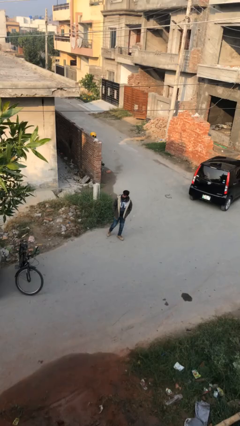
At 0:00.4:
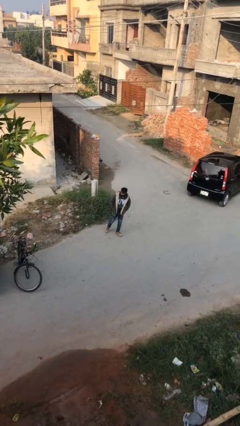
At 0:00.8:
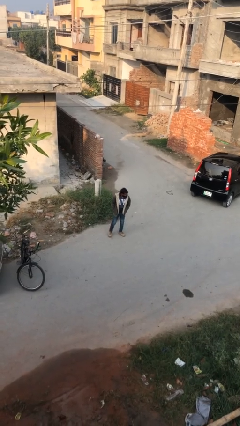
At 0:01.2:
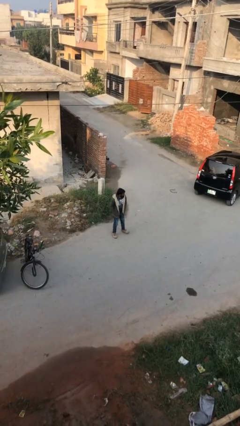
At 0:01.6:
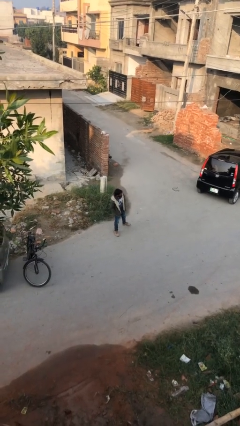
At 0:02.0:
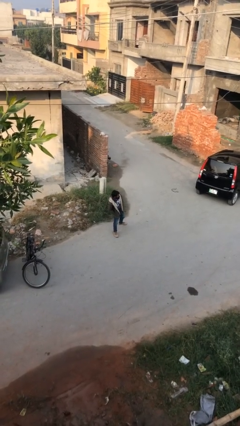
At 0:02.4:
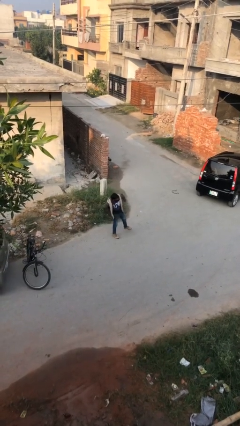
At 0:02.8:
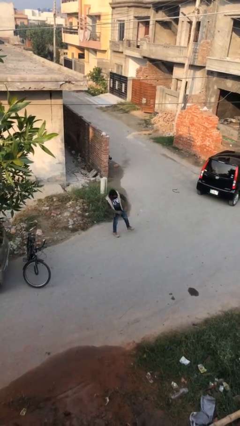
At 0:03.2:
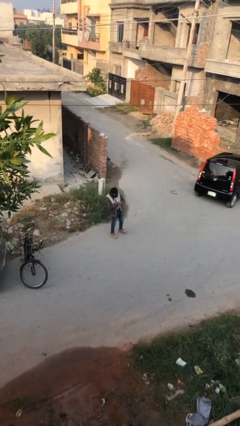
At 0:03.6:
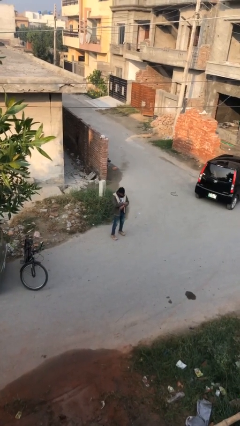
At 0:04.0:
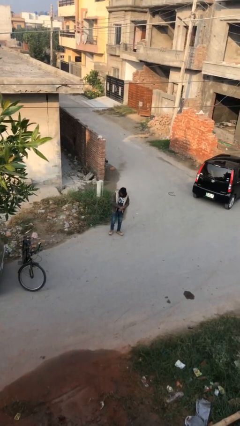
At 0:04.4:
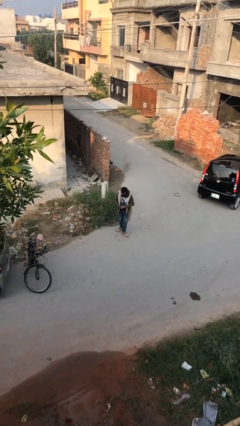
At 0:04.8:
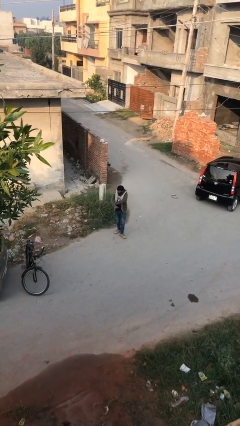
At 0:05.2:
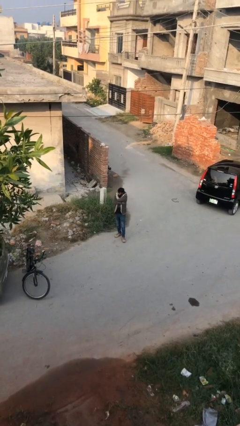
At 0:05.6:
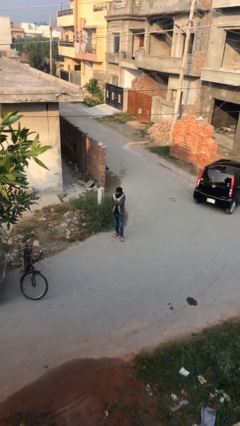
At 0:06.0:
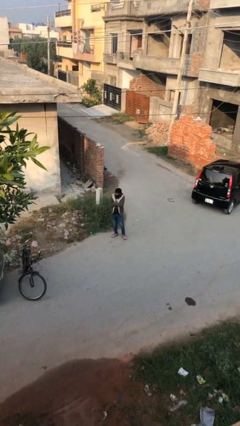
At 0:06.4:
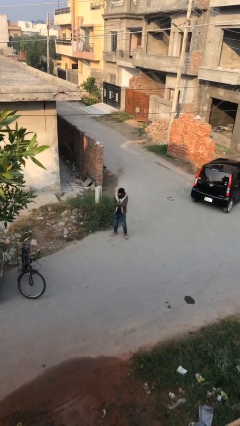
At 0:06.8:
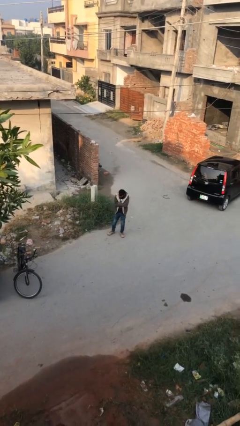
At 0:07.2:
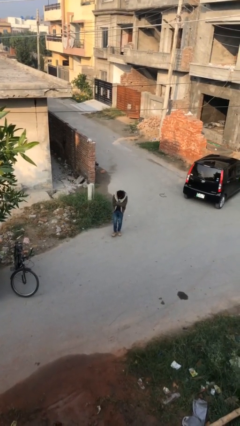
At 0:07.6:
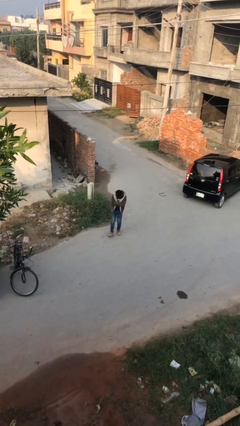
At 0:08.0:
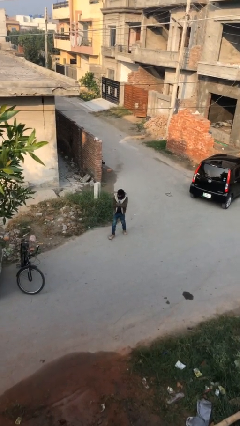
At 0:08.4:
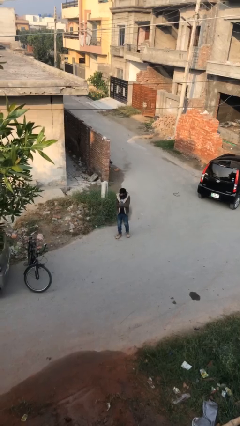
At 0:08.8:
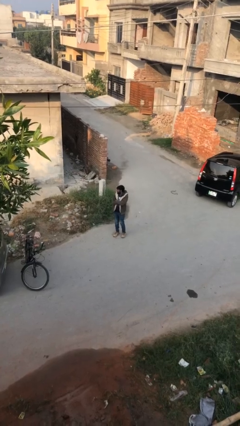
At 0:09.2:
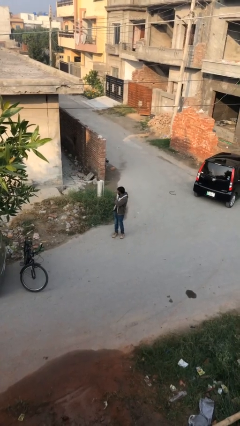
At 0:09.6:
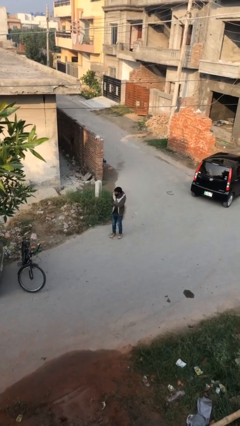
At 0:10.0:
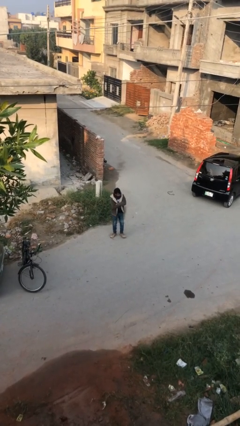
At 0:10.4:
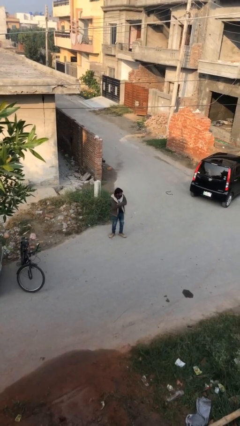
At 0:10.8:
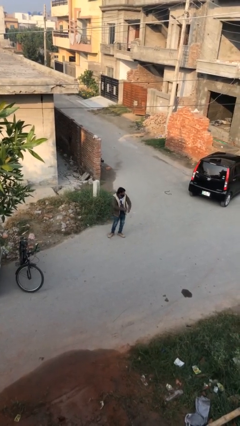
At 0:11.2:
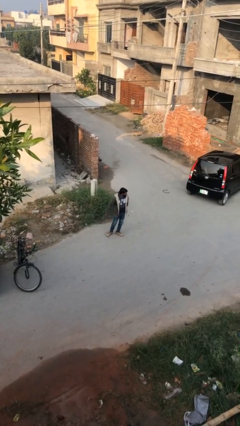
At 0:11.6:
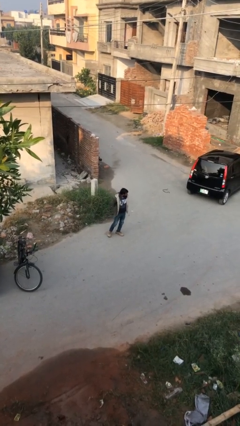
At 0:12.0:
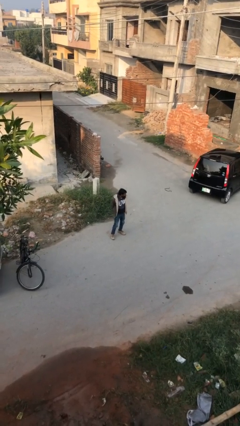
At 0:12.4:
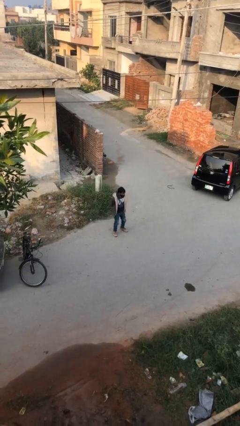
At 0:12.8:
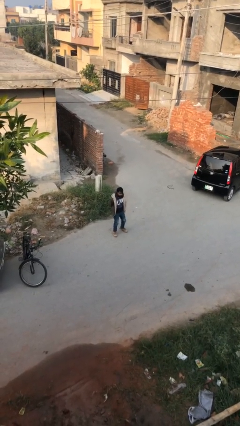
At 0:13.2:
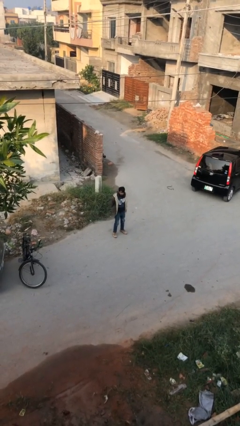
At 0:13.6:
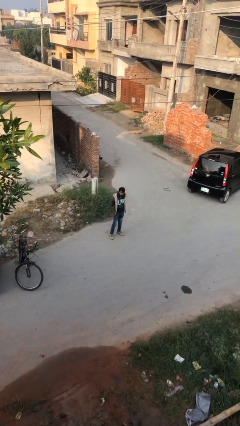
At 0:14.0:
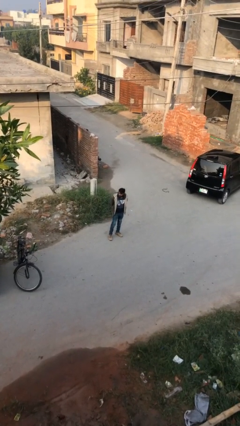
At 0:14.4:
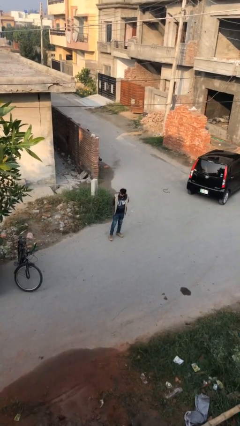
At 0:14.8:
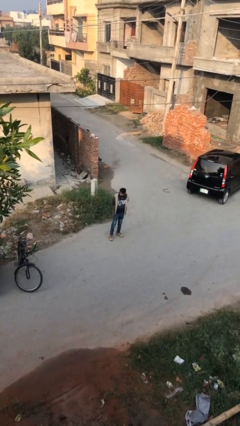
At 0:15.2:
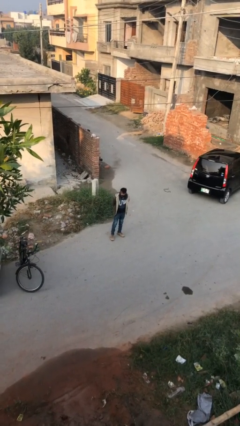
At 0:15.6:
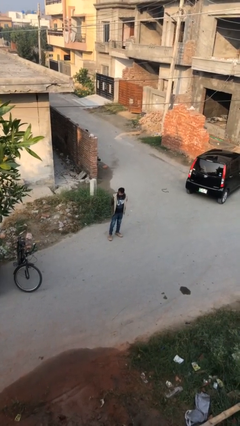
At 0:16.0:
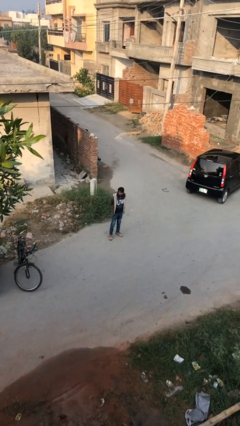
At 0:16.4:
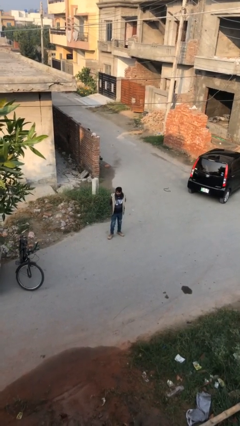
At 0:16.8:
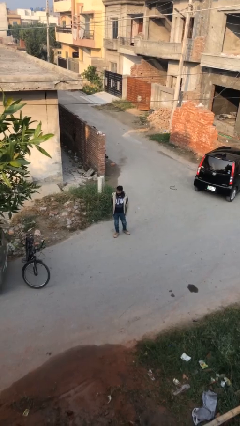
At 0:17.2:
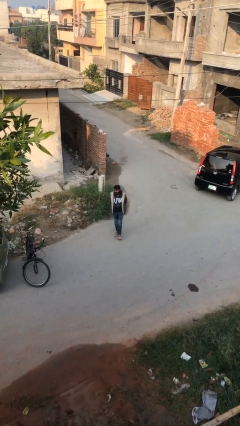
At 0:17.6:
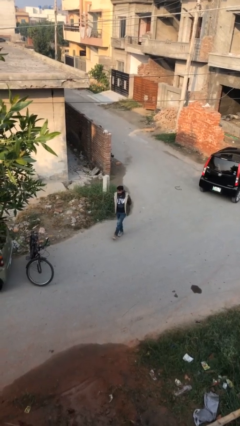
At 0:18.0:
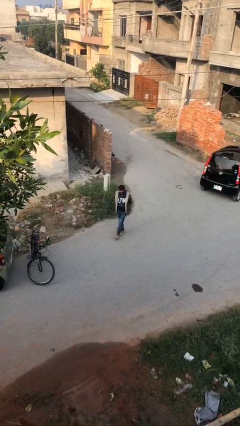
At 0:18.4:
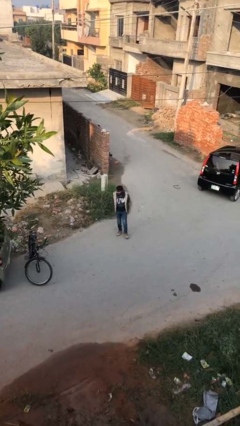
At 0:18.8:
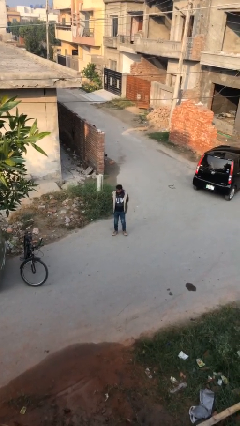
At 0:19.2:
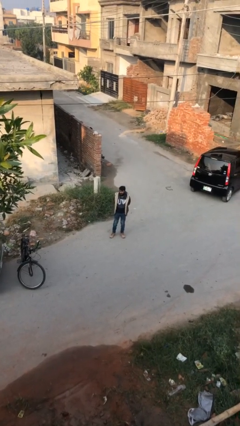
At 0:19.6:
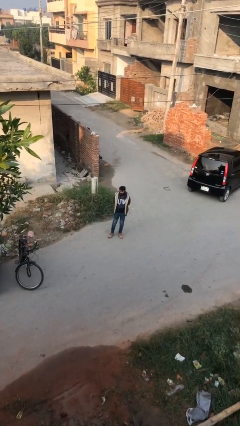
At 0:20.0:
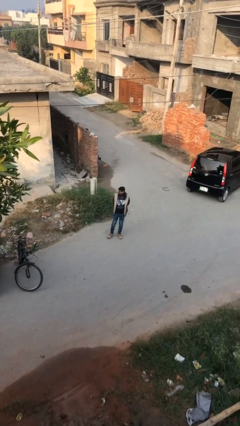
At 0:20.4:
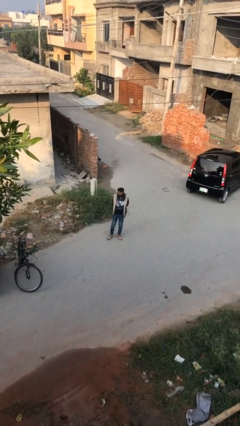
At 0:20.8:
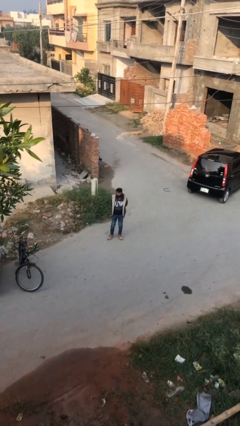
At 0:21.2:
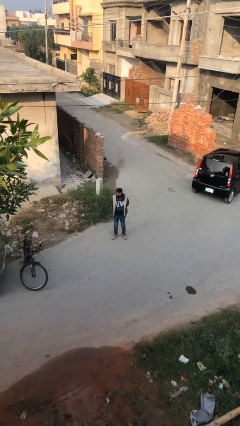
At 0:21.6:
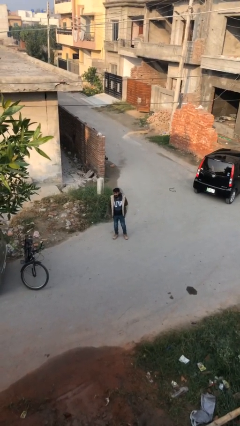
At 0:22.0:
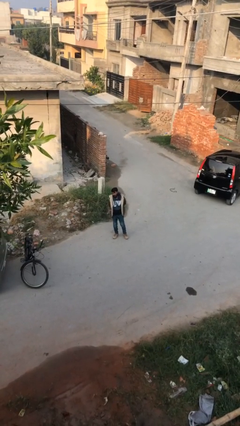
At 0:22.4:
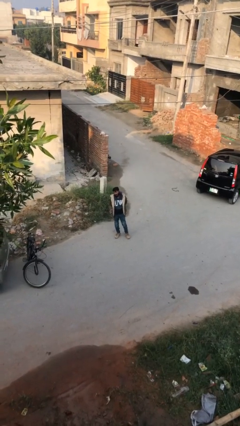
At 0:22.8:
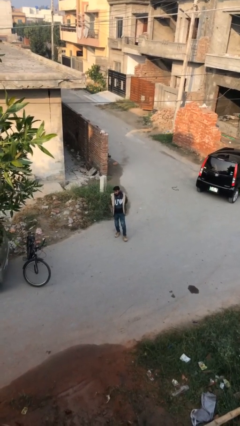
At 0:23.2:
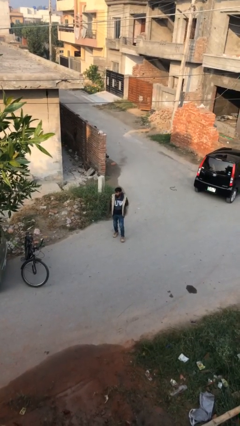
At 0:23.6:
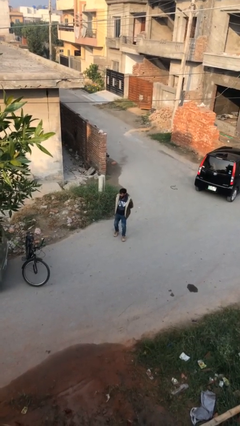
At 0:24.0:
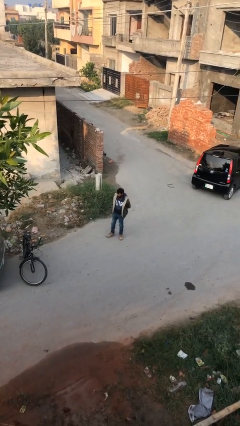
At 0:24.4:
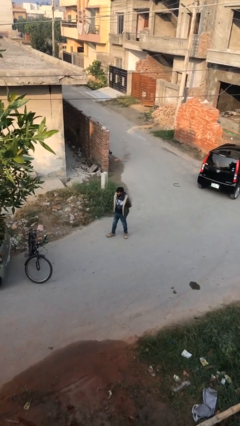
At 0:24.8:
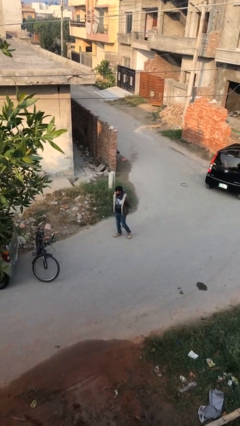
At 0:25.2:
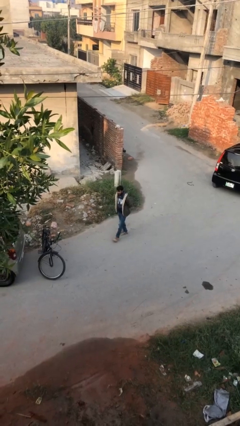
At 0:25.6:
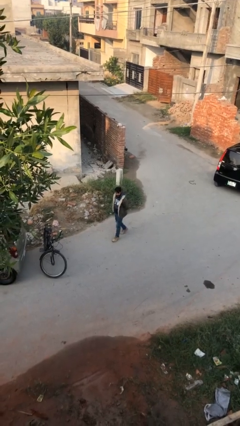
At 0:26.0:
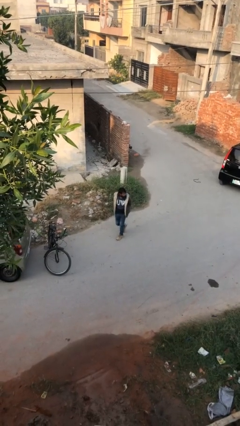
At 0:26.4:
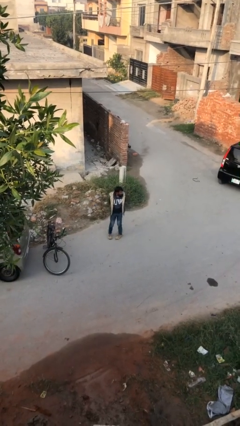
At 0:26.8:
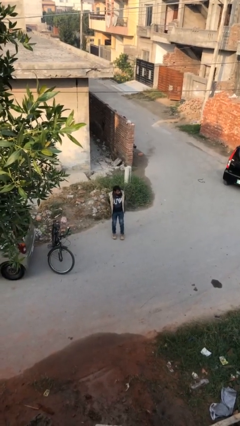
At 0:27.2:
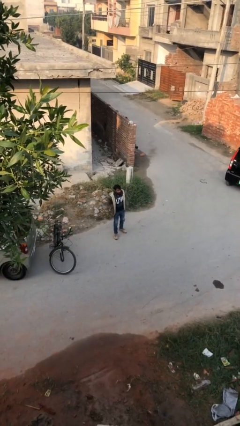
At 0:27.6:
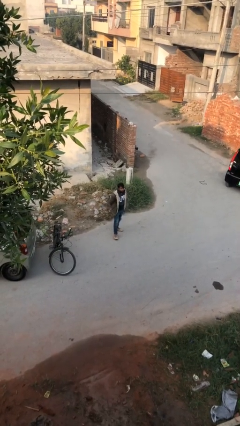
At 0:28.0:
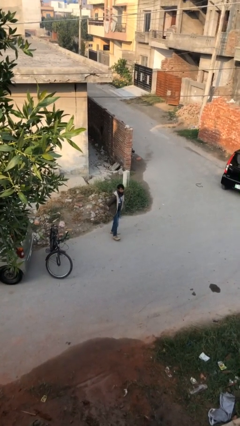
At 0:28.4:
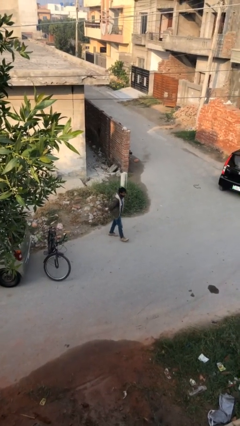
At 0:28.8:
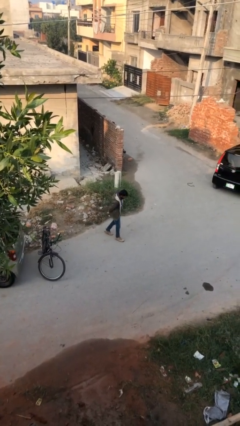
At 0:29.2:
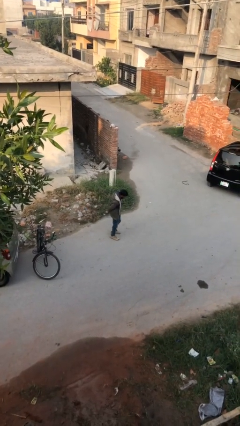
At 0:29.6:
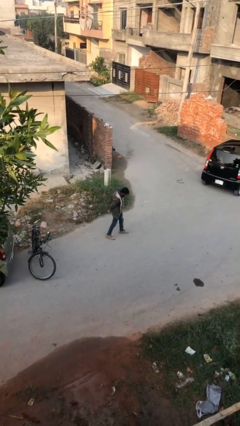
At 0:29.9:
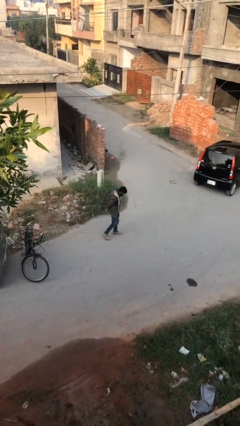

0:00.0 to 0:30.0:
person walks

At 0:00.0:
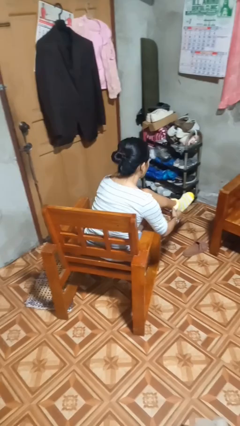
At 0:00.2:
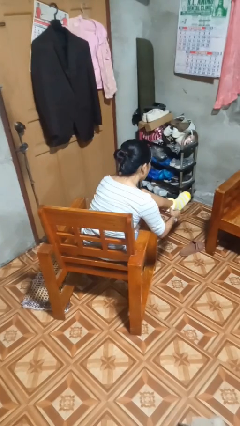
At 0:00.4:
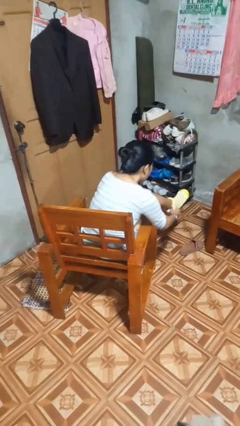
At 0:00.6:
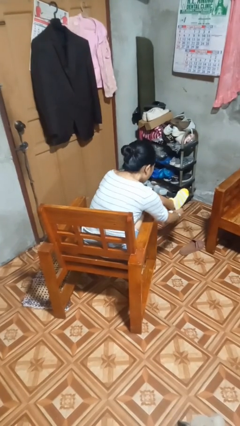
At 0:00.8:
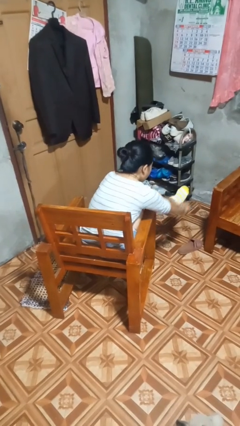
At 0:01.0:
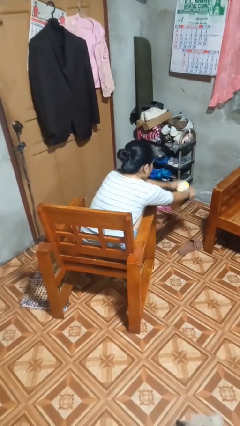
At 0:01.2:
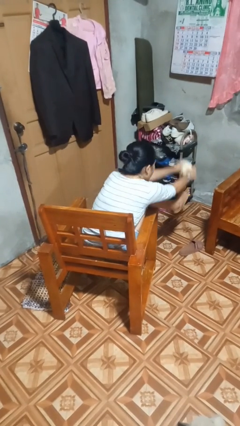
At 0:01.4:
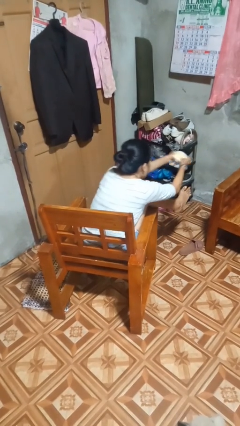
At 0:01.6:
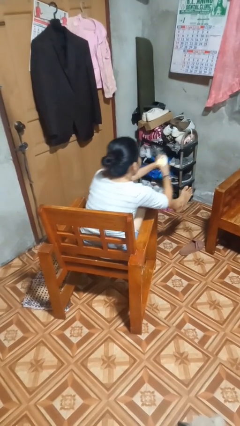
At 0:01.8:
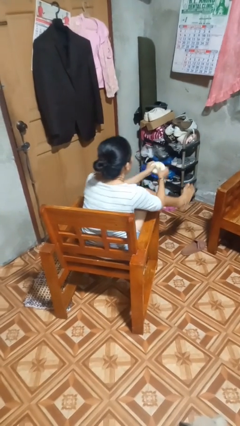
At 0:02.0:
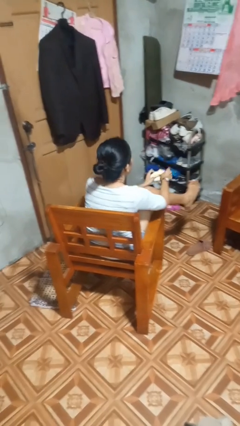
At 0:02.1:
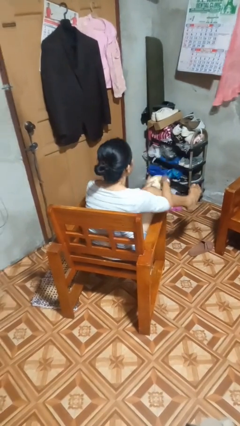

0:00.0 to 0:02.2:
person takes off socks

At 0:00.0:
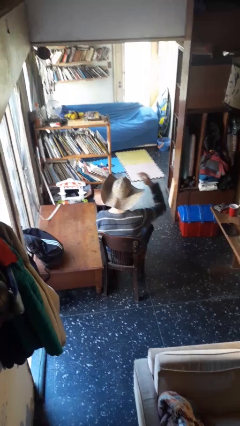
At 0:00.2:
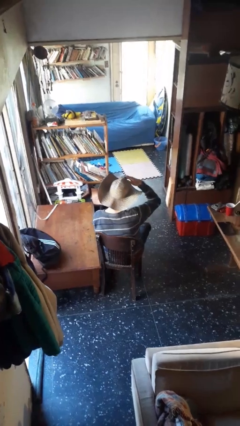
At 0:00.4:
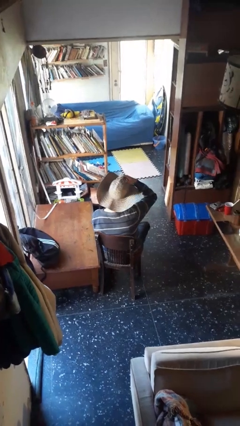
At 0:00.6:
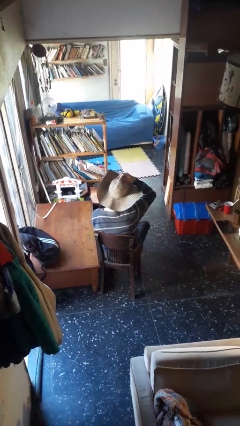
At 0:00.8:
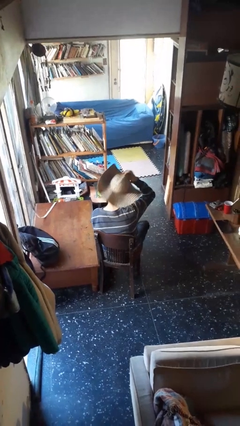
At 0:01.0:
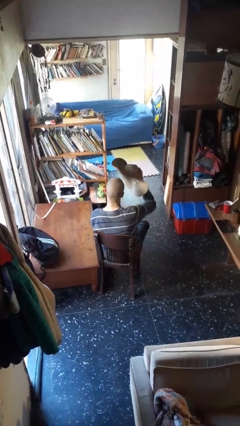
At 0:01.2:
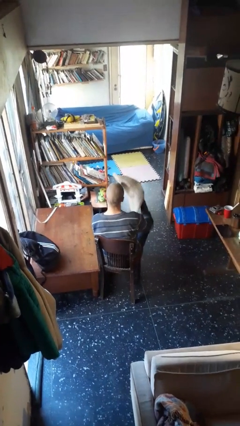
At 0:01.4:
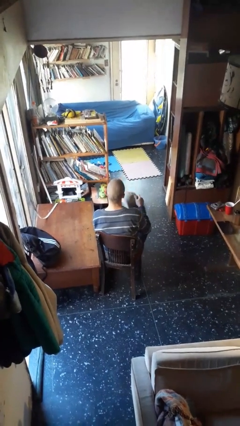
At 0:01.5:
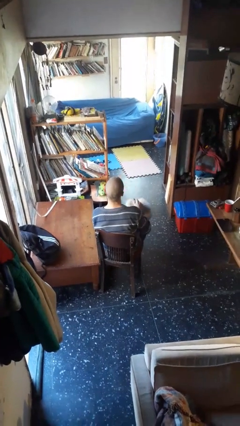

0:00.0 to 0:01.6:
person takes off hat
